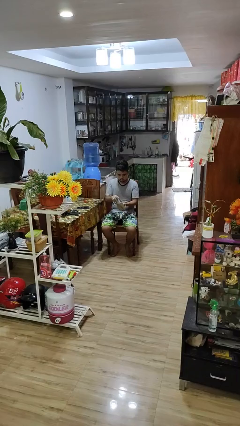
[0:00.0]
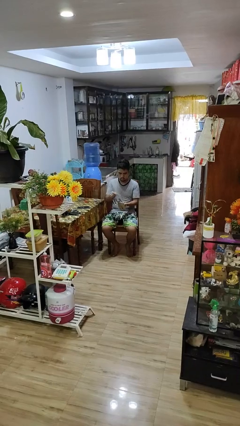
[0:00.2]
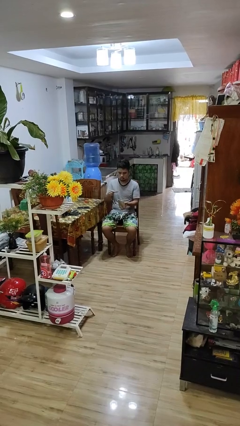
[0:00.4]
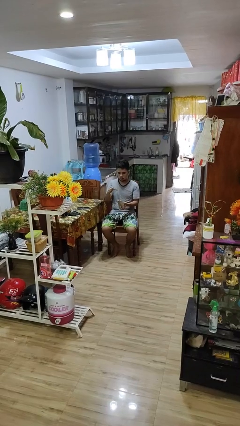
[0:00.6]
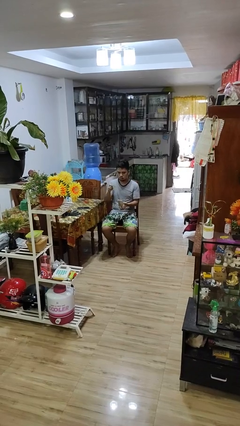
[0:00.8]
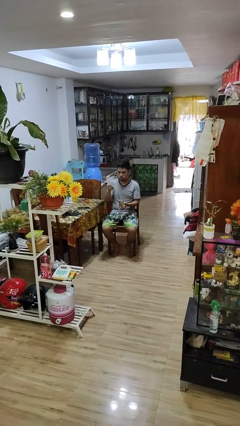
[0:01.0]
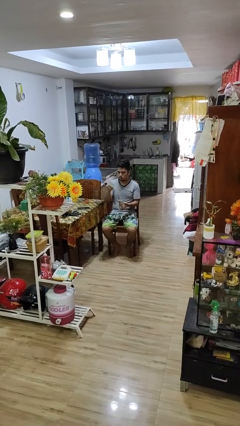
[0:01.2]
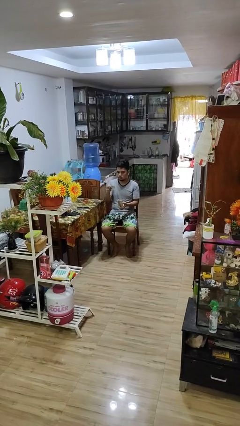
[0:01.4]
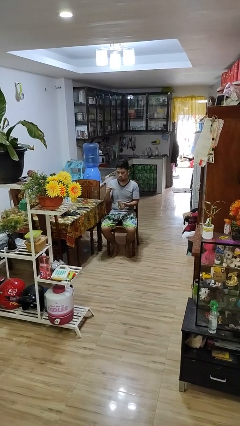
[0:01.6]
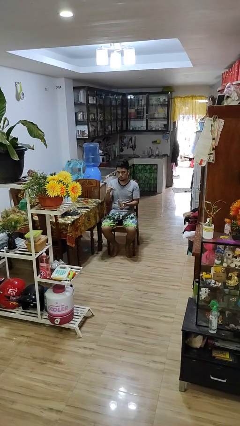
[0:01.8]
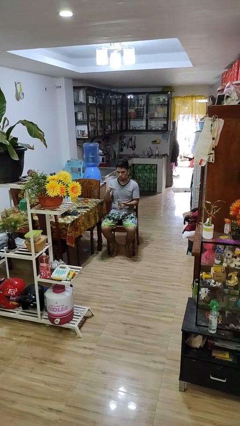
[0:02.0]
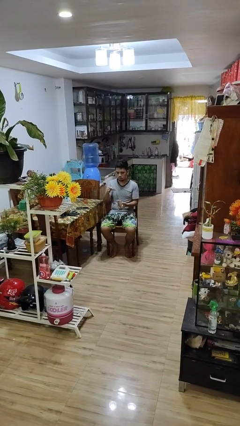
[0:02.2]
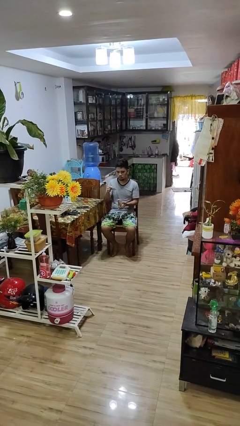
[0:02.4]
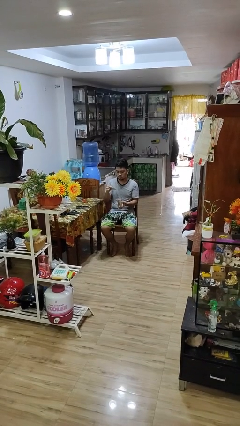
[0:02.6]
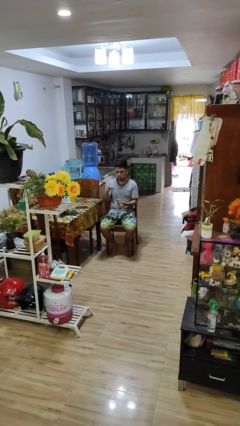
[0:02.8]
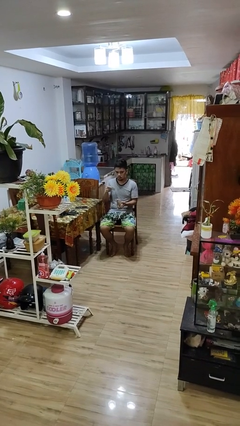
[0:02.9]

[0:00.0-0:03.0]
person takes object from purse

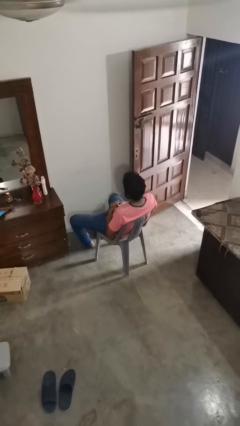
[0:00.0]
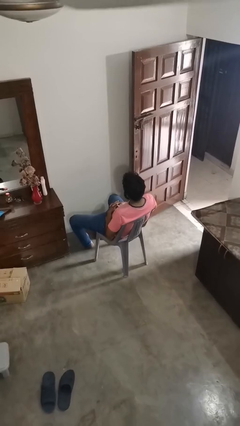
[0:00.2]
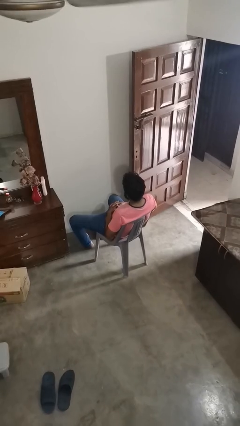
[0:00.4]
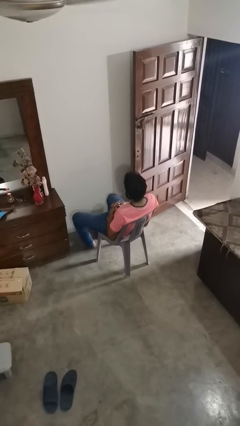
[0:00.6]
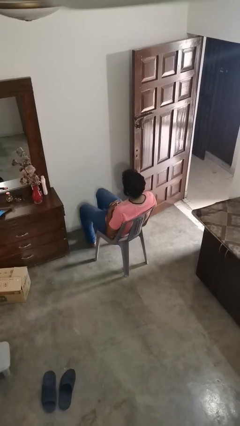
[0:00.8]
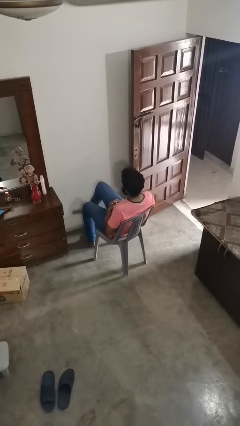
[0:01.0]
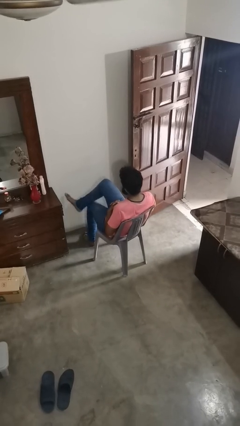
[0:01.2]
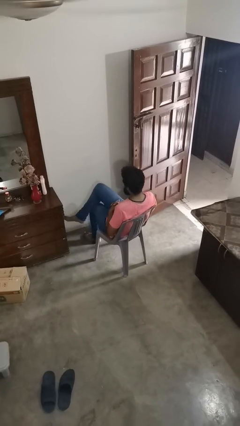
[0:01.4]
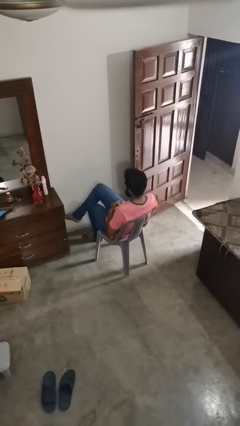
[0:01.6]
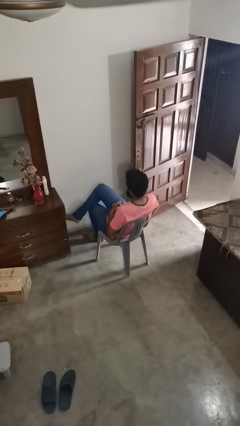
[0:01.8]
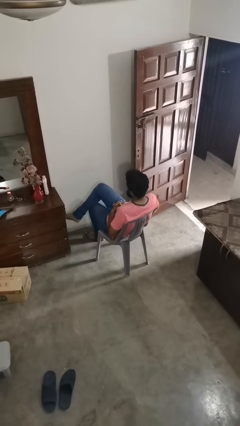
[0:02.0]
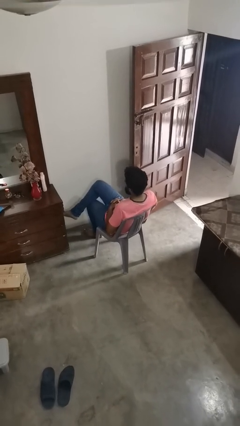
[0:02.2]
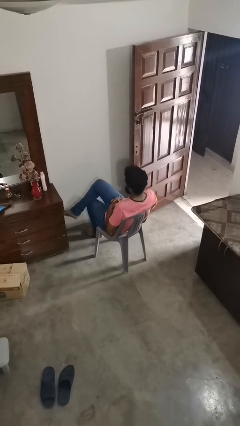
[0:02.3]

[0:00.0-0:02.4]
person crosses legs

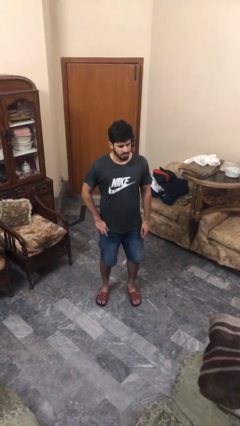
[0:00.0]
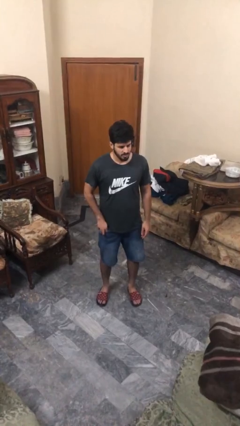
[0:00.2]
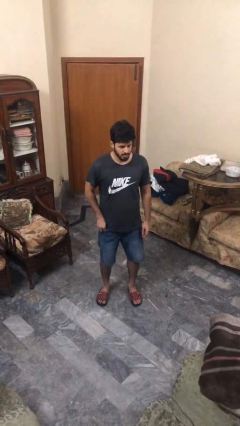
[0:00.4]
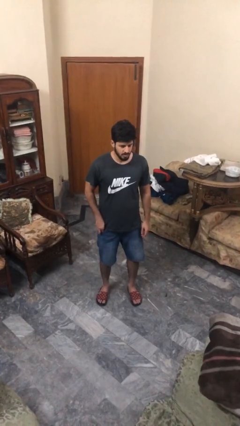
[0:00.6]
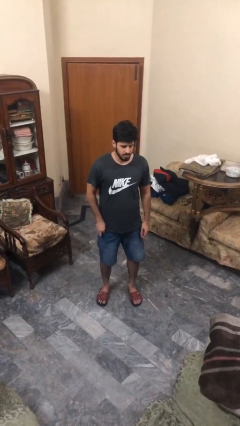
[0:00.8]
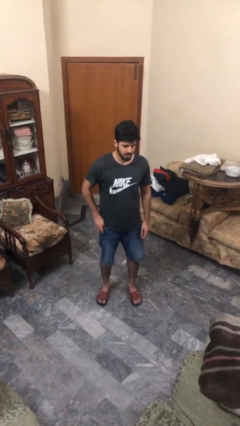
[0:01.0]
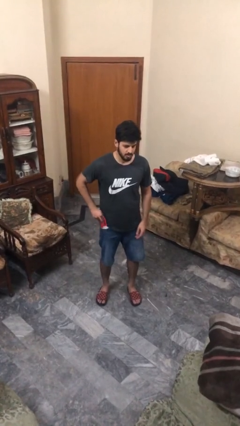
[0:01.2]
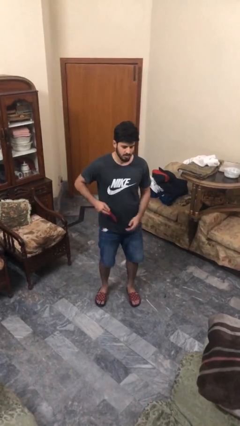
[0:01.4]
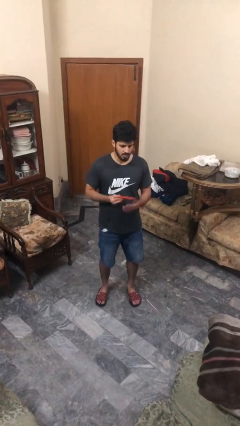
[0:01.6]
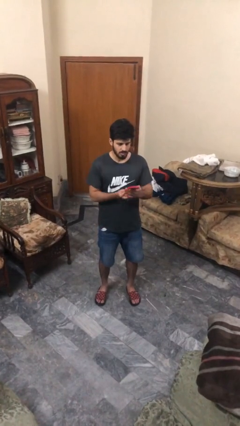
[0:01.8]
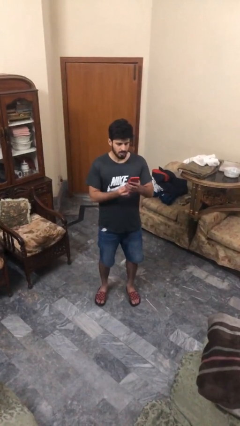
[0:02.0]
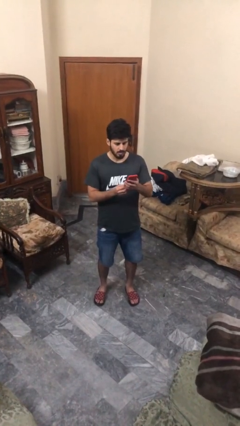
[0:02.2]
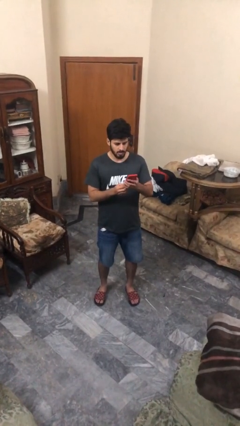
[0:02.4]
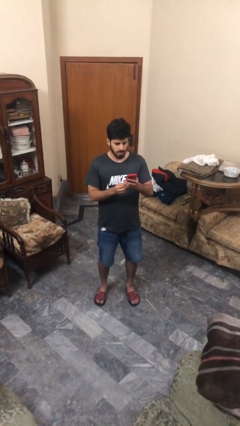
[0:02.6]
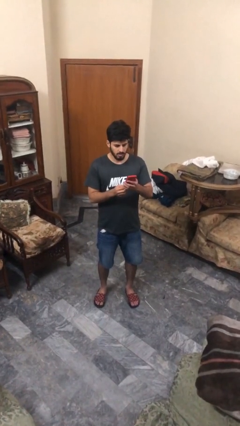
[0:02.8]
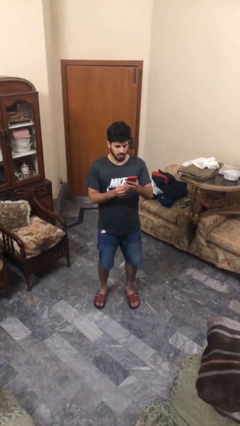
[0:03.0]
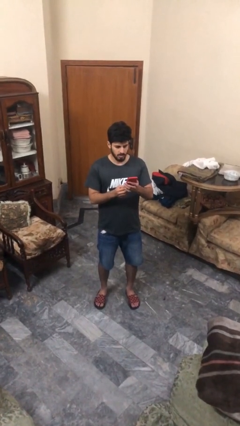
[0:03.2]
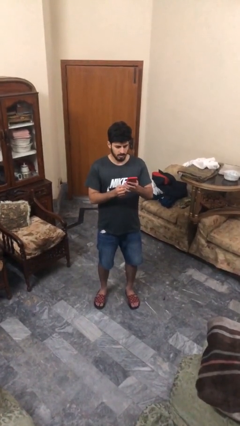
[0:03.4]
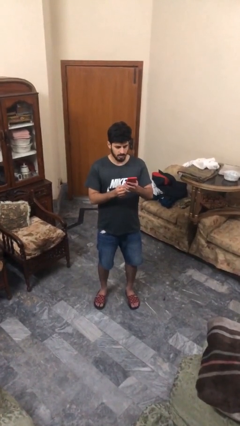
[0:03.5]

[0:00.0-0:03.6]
person takes phone from pocket

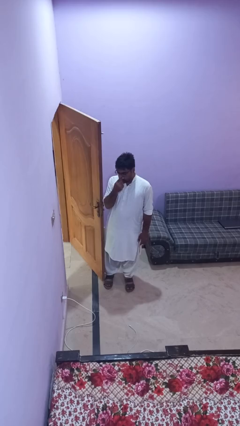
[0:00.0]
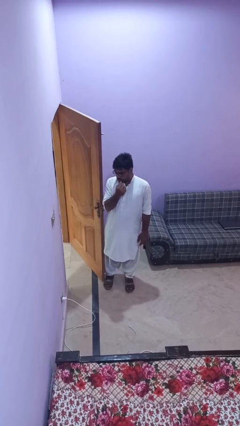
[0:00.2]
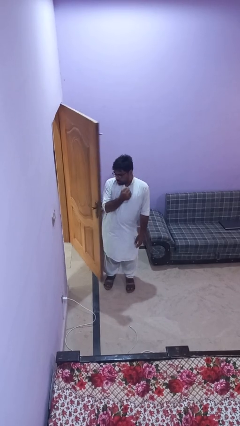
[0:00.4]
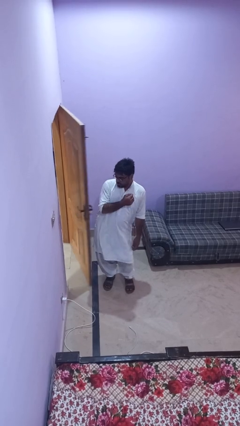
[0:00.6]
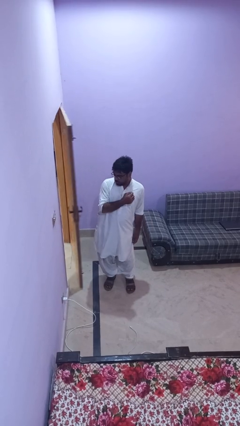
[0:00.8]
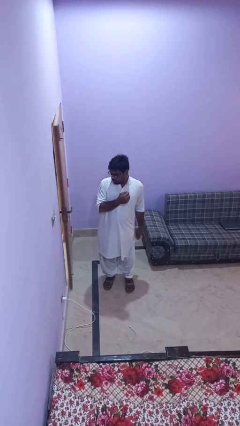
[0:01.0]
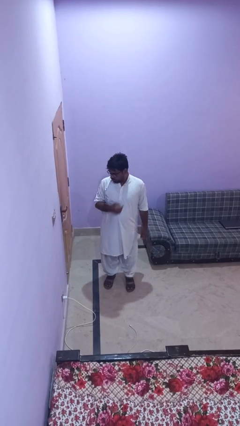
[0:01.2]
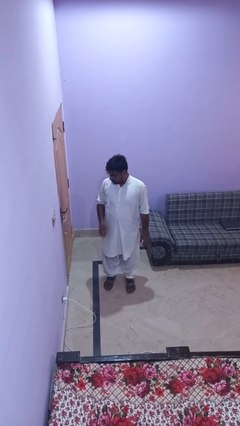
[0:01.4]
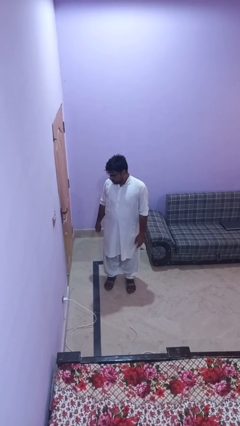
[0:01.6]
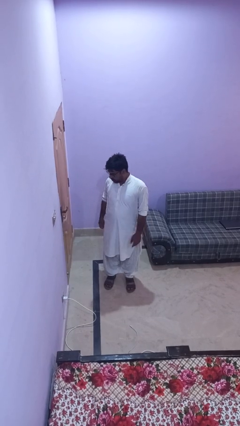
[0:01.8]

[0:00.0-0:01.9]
person closes door with hip

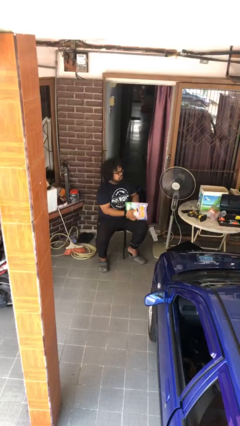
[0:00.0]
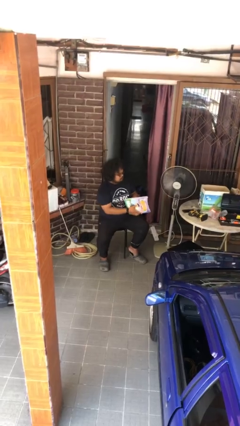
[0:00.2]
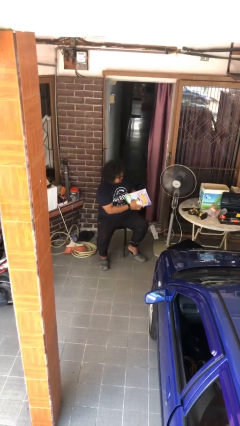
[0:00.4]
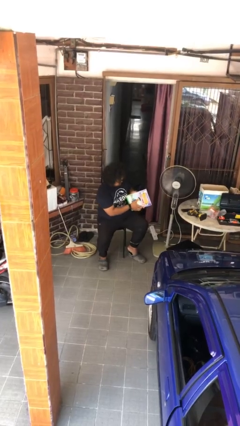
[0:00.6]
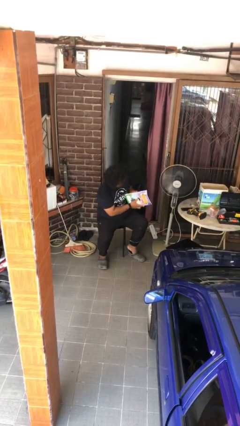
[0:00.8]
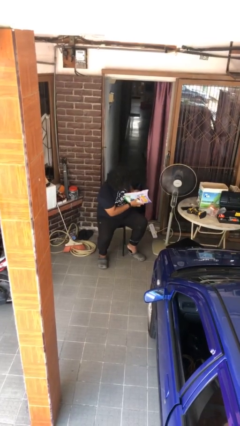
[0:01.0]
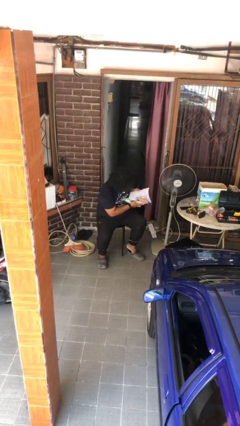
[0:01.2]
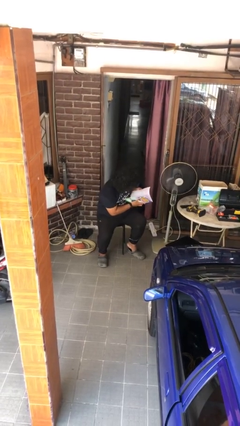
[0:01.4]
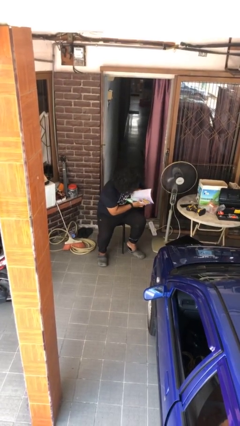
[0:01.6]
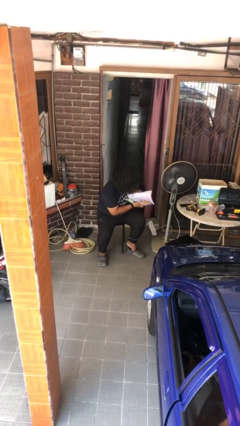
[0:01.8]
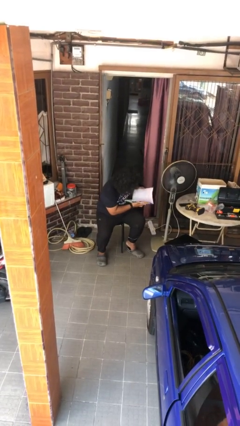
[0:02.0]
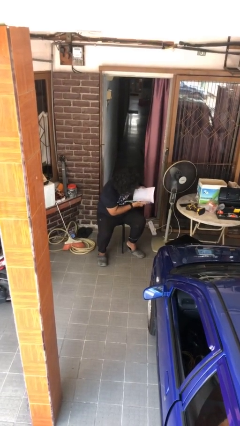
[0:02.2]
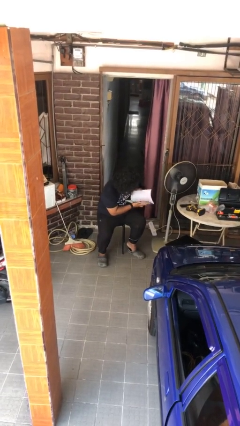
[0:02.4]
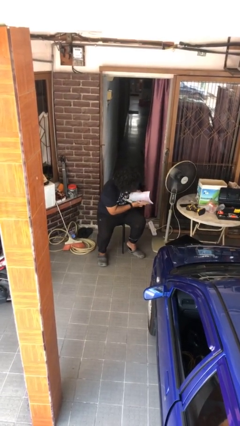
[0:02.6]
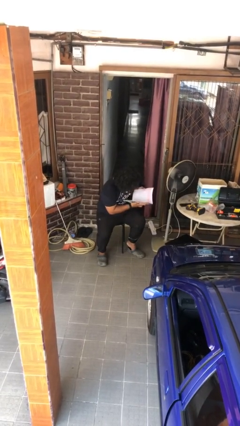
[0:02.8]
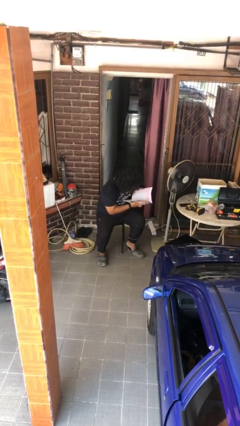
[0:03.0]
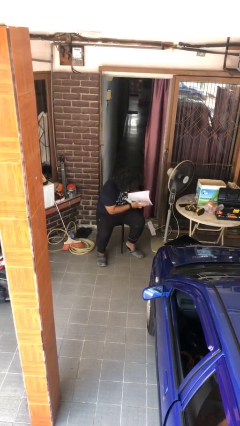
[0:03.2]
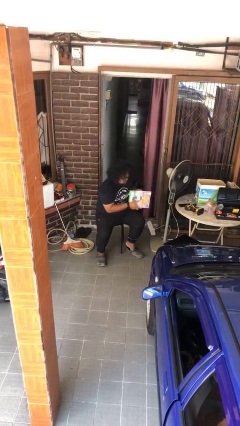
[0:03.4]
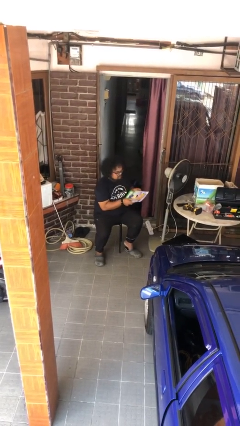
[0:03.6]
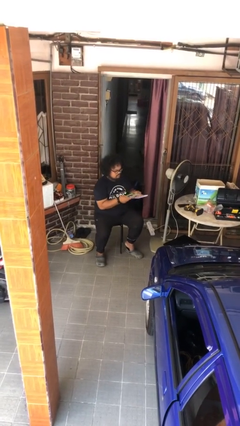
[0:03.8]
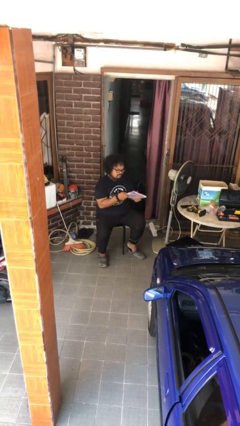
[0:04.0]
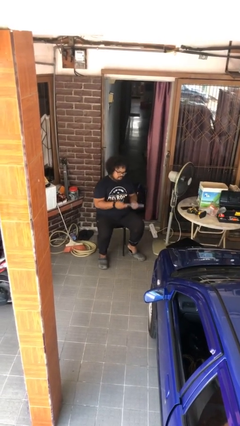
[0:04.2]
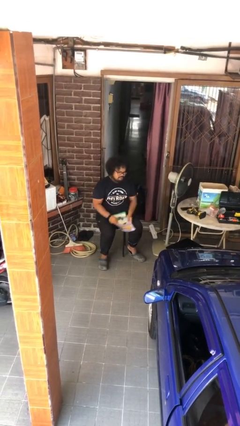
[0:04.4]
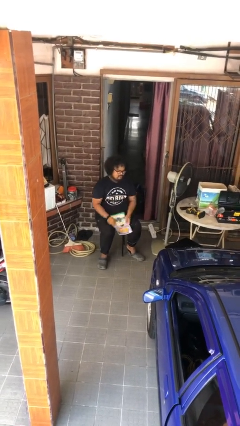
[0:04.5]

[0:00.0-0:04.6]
person reads document

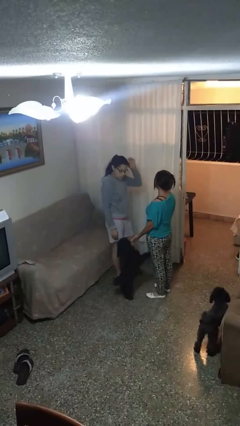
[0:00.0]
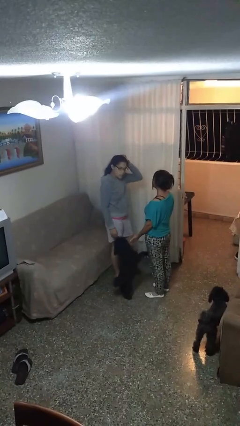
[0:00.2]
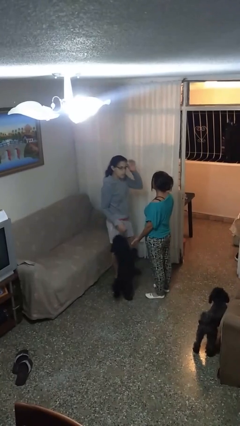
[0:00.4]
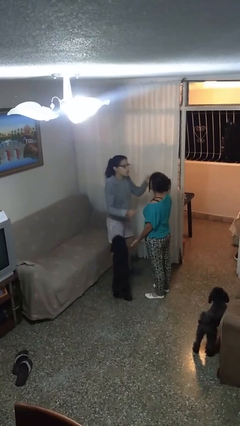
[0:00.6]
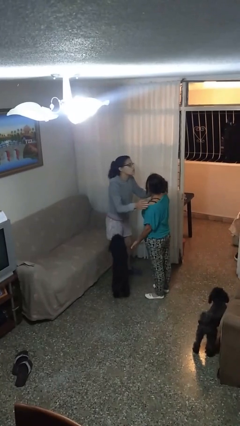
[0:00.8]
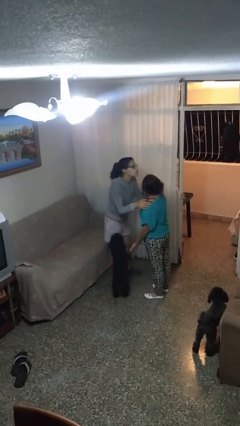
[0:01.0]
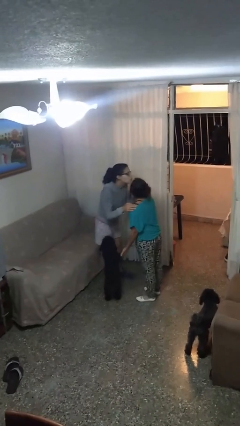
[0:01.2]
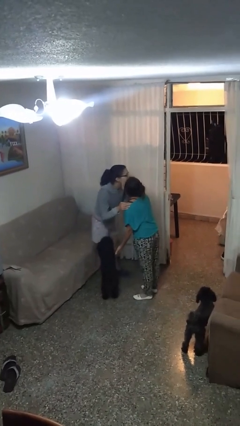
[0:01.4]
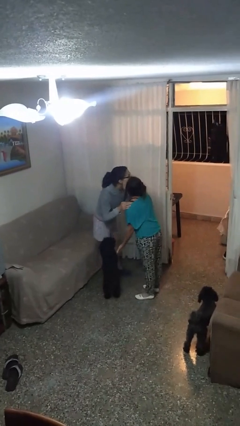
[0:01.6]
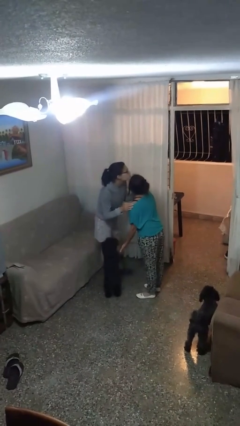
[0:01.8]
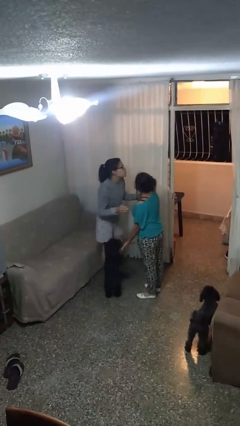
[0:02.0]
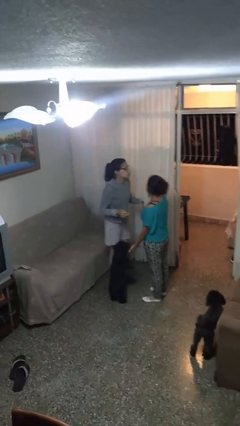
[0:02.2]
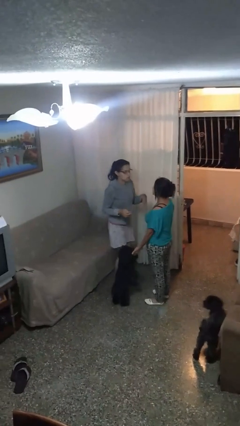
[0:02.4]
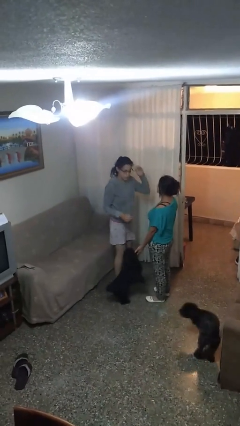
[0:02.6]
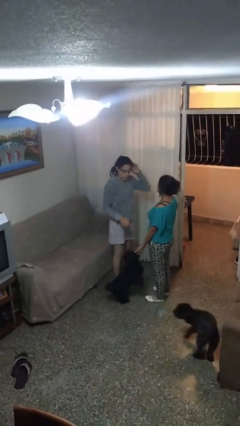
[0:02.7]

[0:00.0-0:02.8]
person kisses cheek of person
